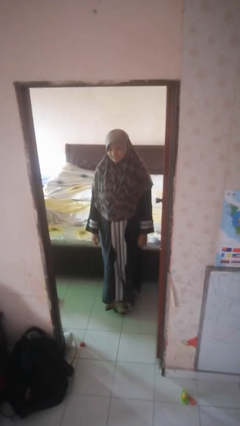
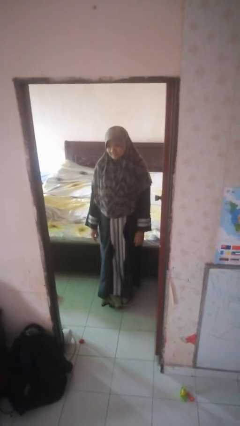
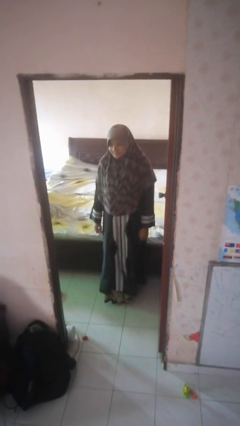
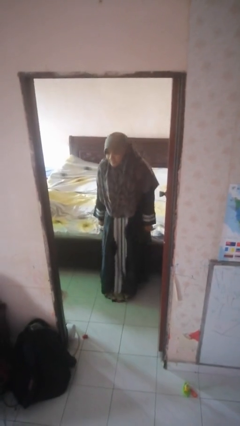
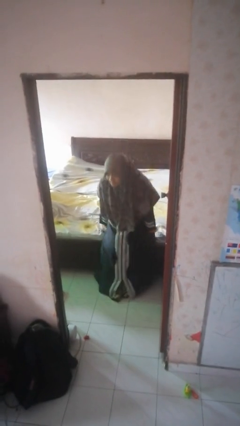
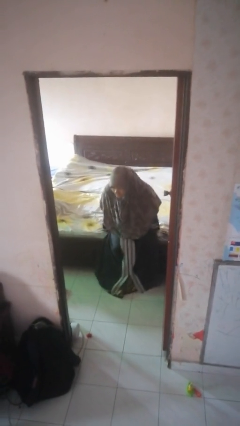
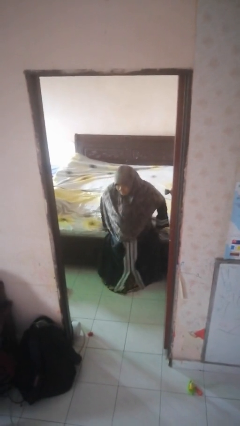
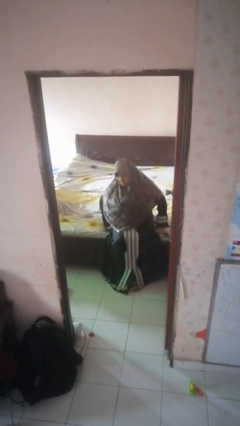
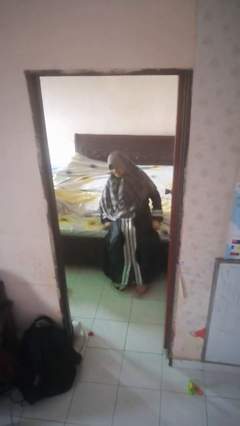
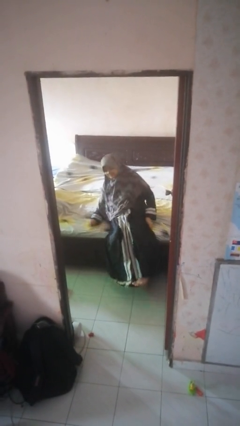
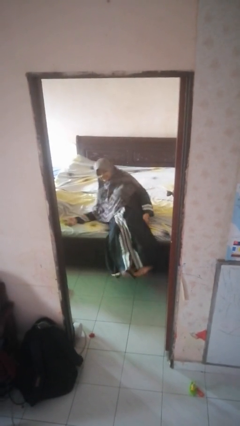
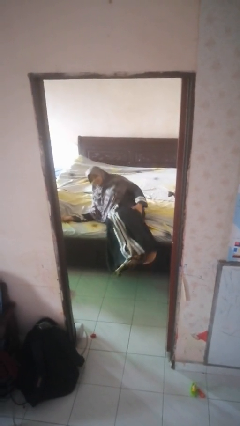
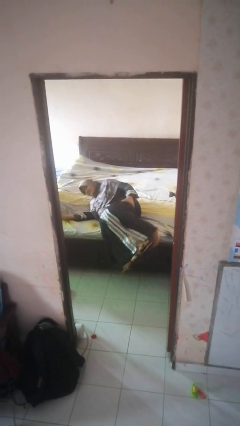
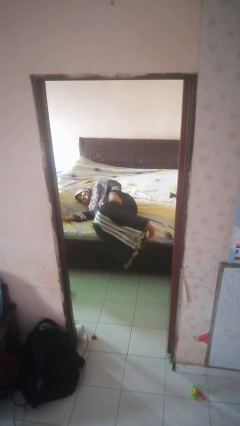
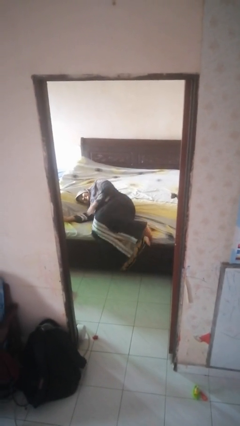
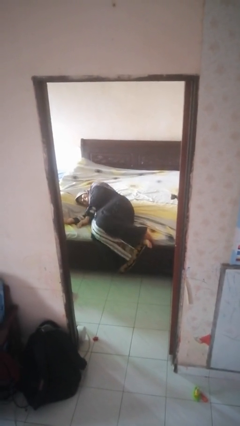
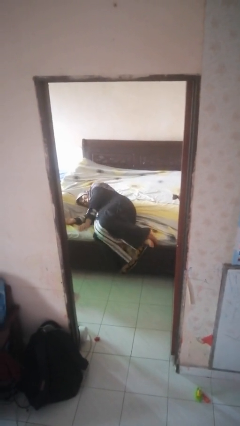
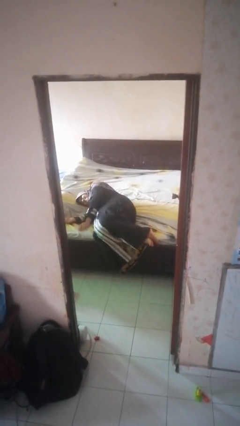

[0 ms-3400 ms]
person lies down on bed

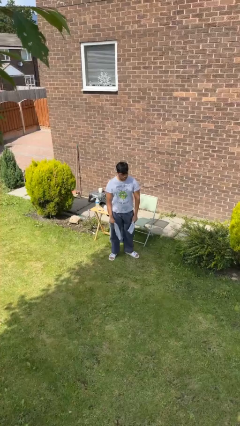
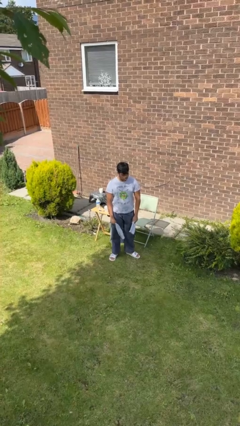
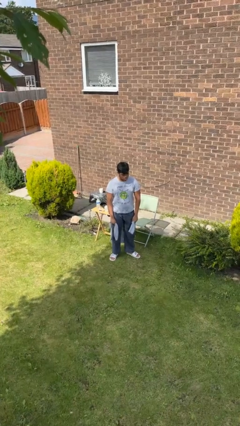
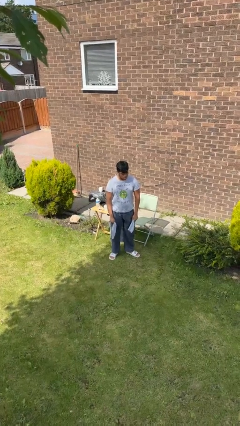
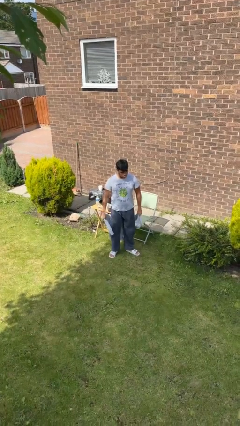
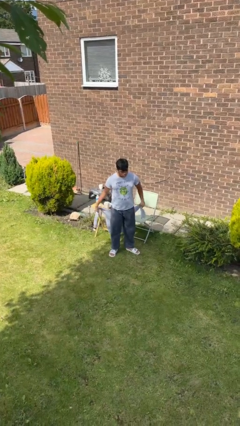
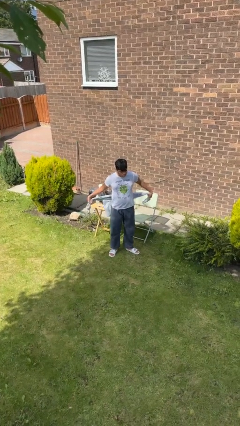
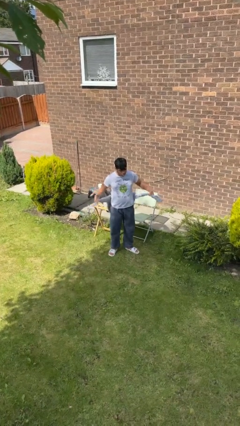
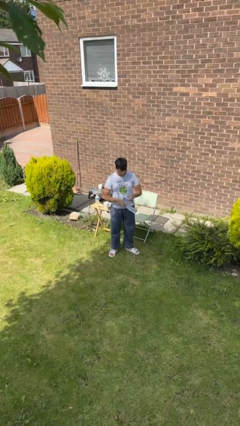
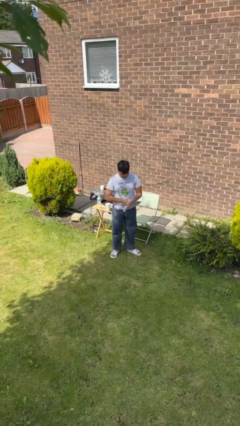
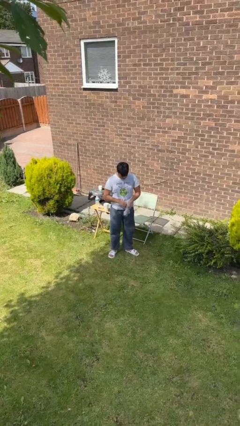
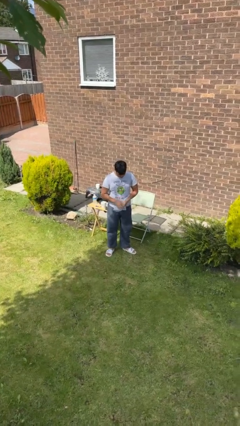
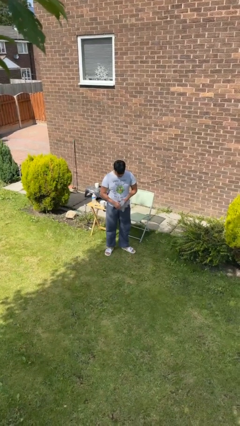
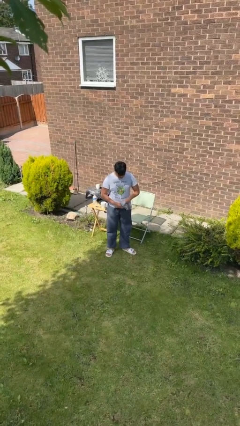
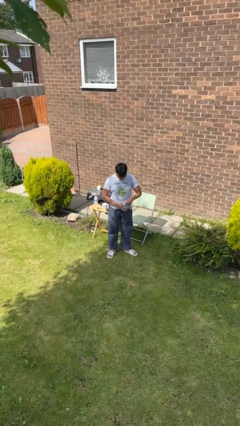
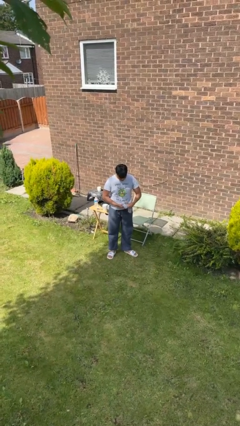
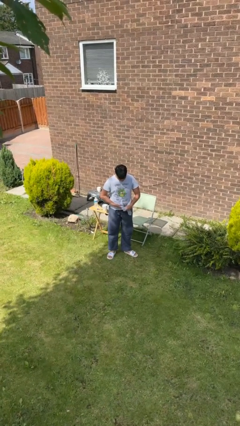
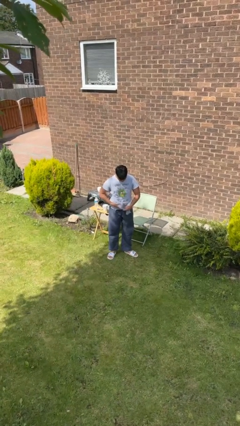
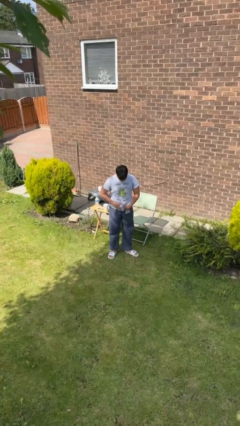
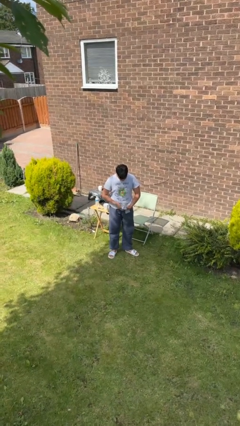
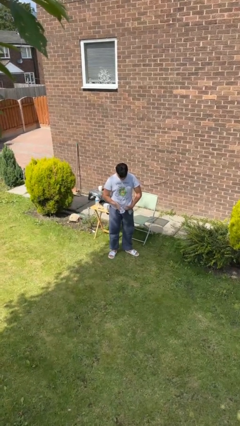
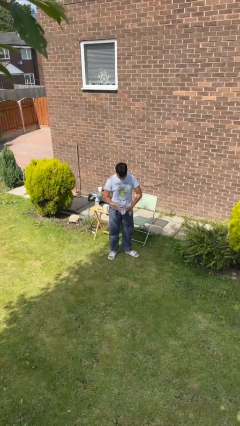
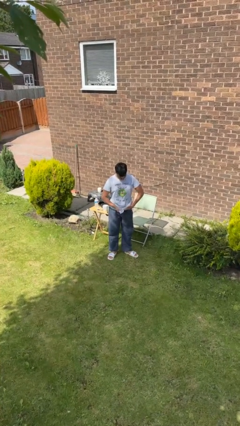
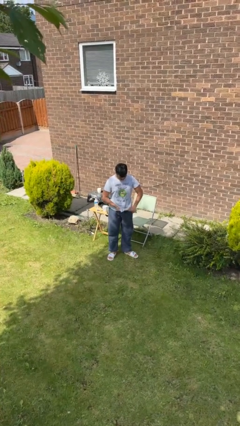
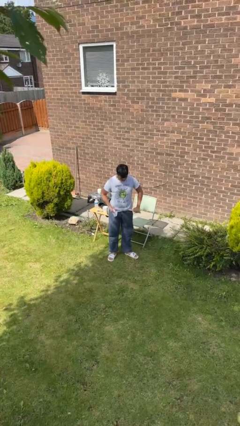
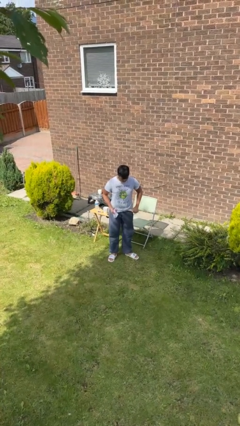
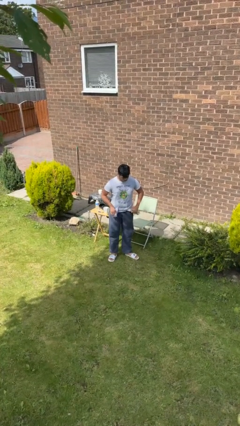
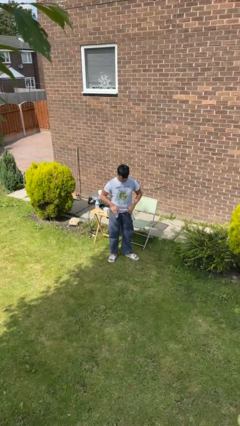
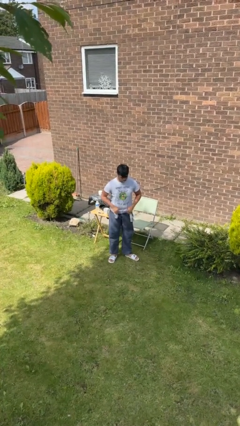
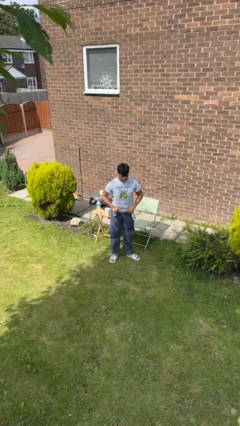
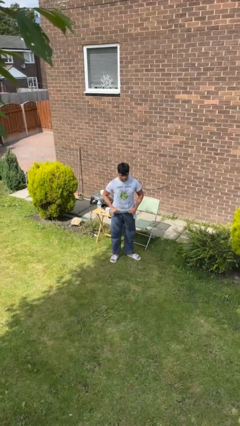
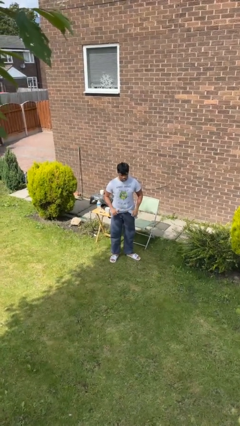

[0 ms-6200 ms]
person ties jacket around waist

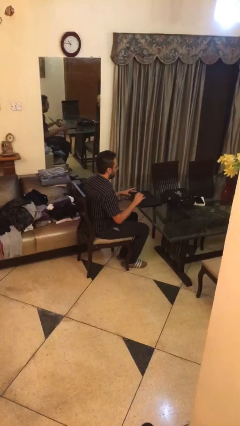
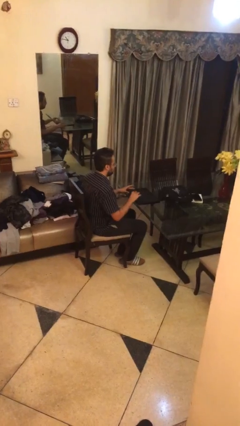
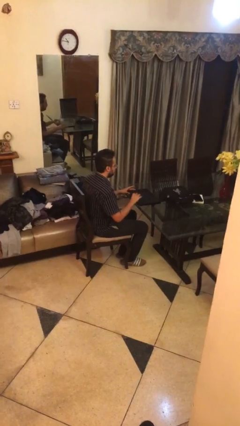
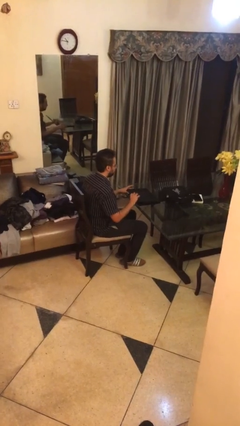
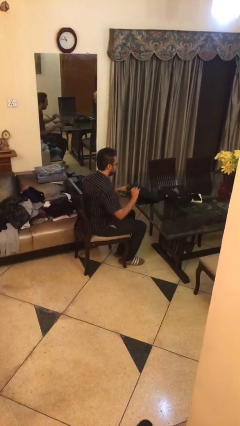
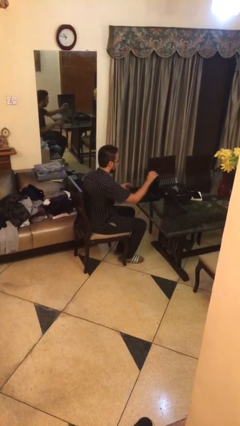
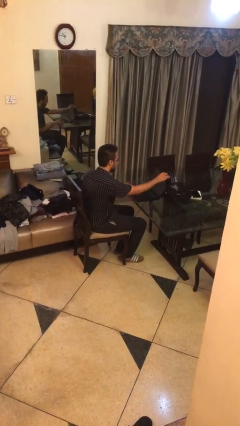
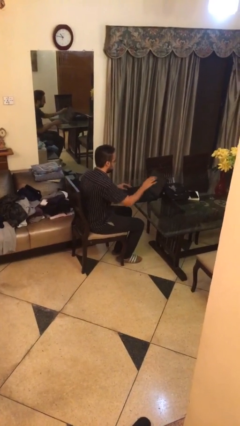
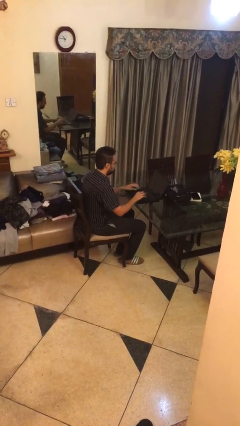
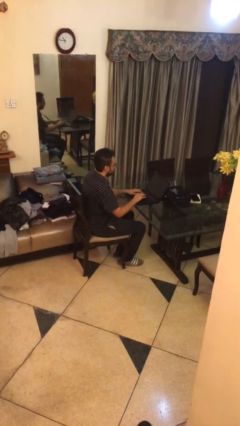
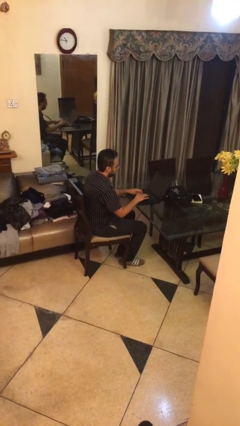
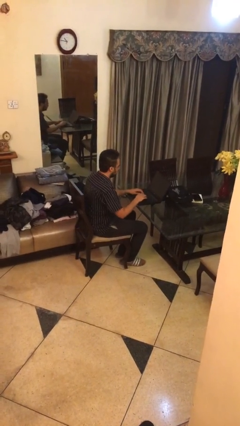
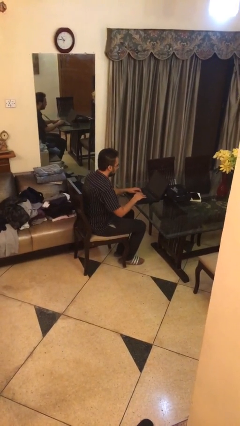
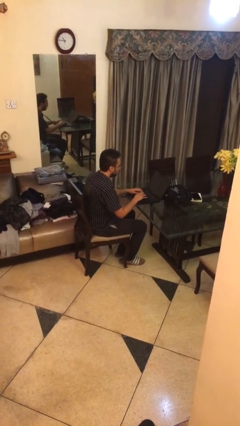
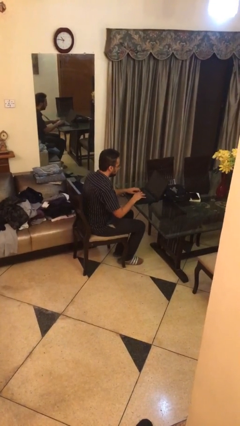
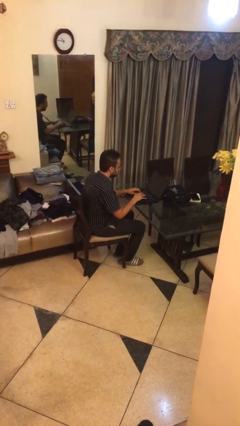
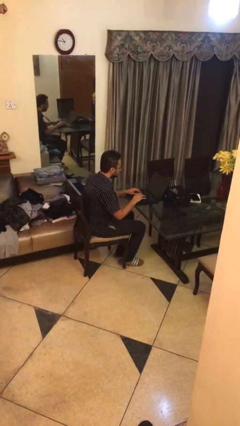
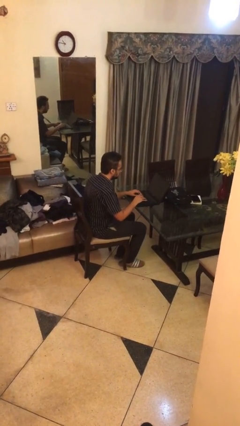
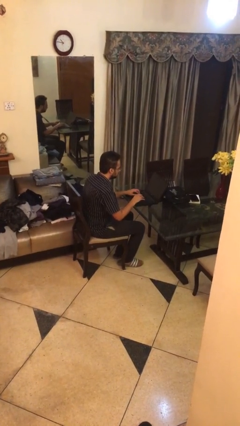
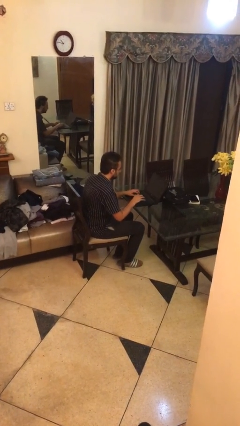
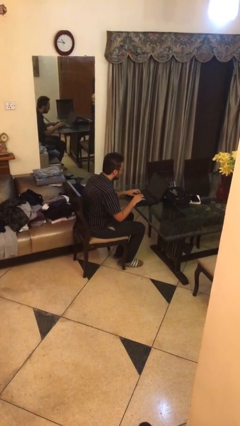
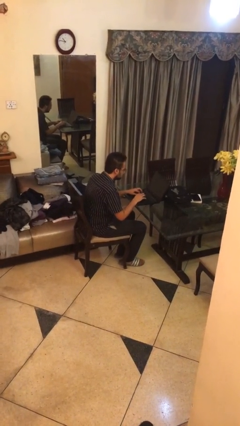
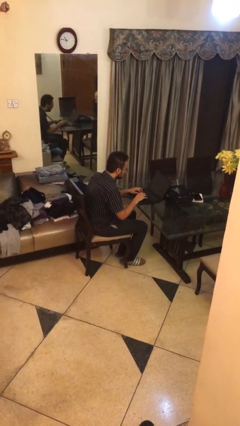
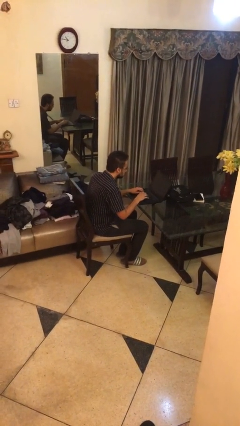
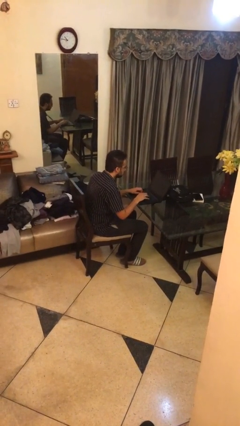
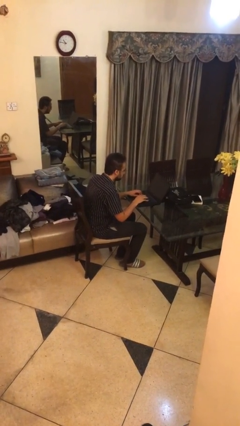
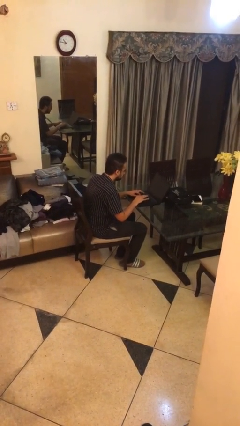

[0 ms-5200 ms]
person interacts with laptop

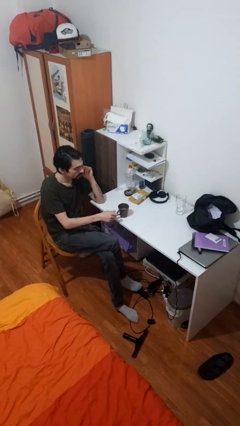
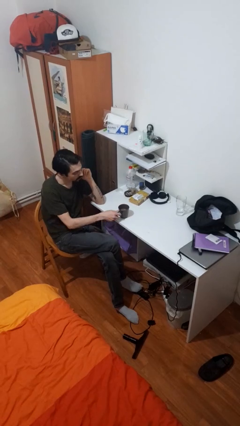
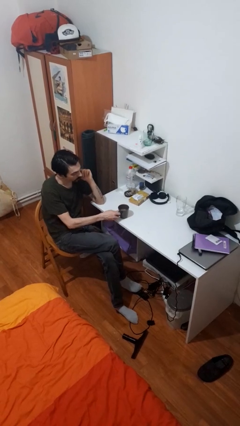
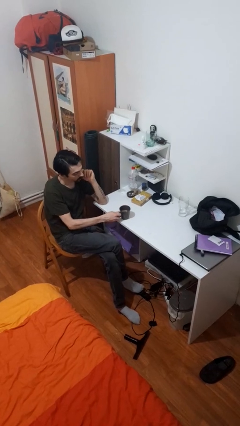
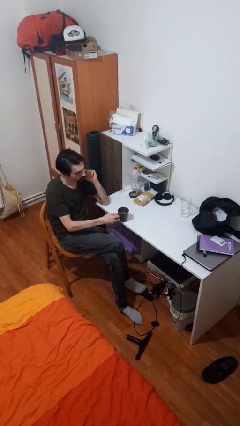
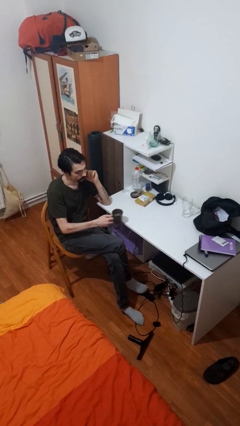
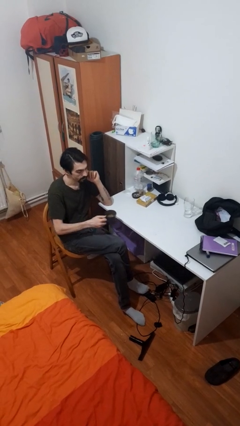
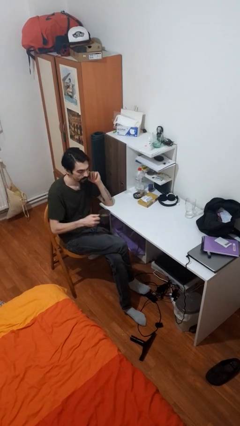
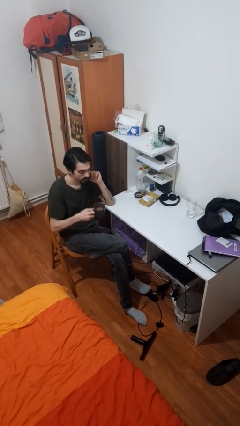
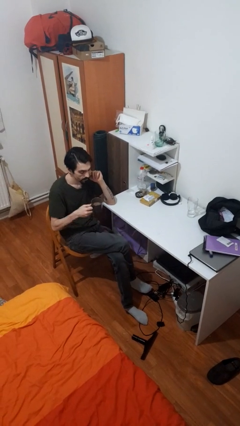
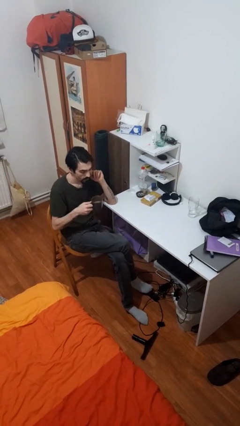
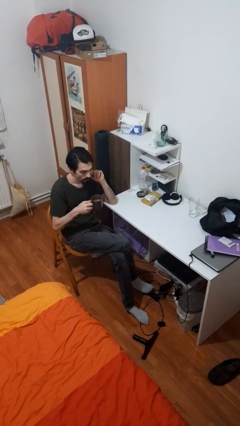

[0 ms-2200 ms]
person picks up object from table

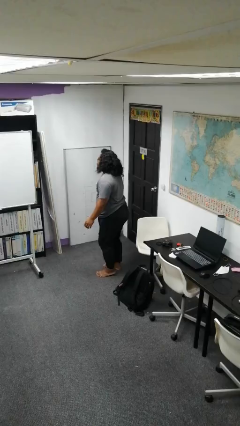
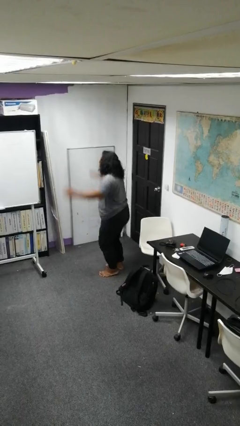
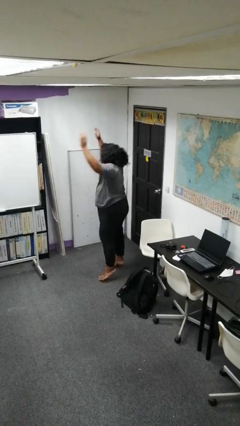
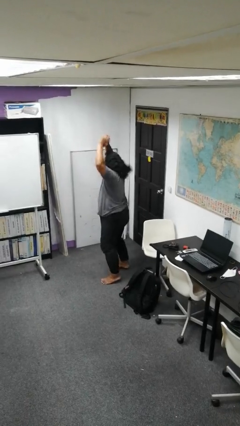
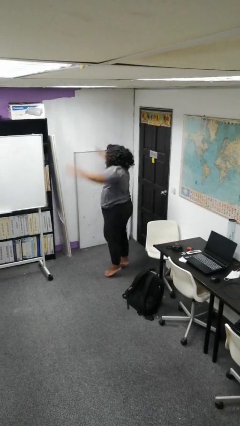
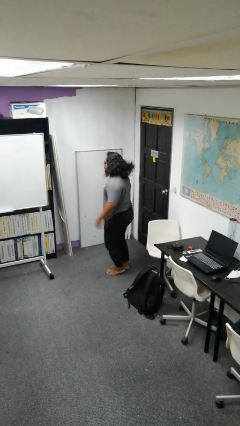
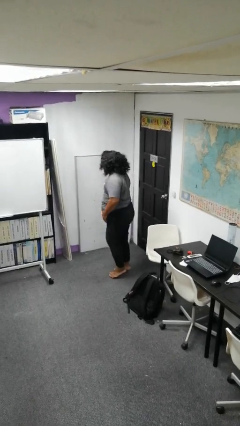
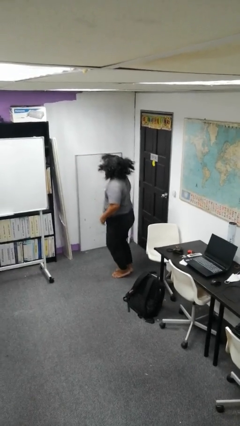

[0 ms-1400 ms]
person exercises with jumping jacks
